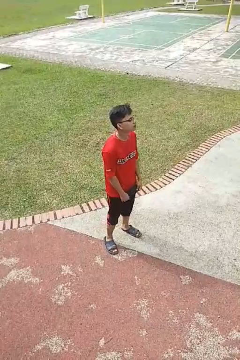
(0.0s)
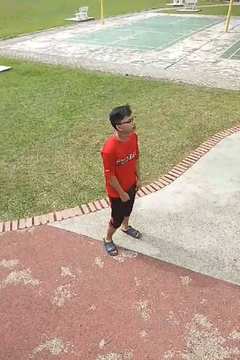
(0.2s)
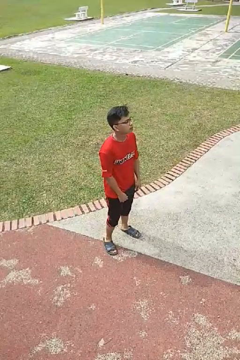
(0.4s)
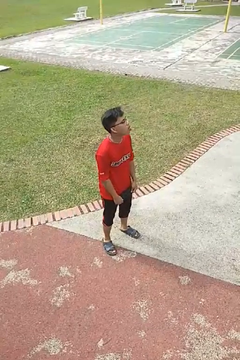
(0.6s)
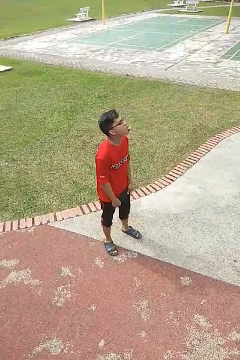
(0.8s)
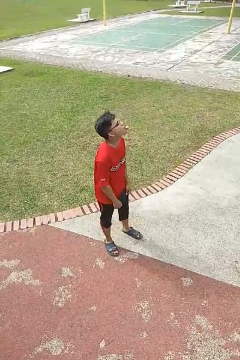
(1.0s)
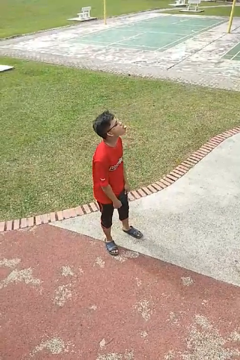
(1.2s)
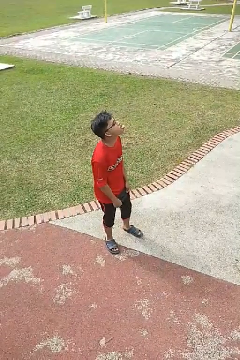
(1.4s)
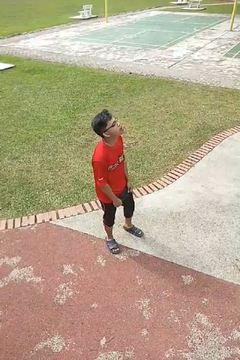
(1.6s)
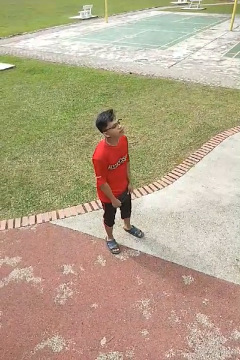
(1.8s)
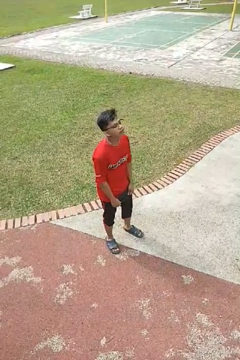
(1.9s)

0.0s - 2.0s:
person sticks out tongue

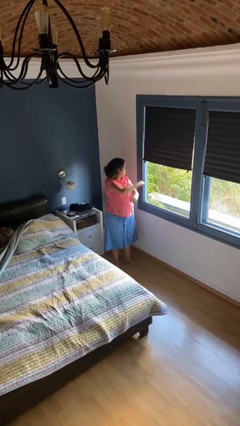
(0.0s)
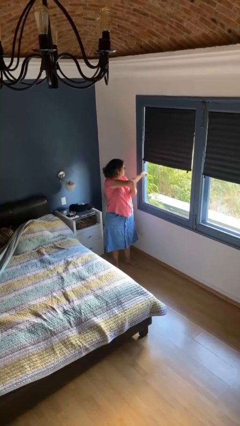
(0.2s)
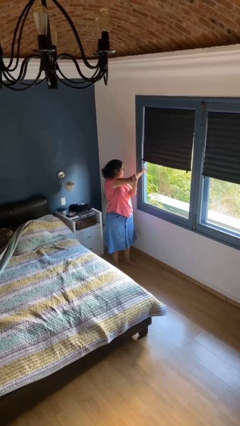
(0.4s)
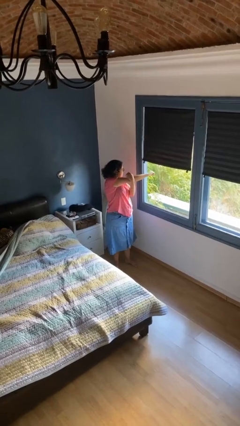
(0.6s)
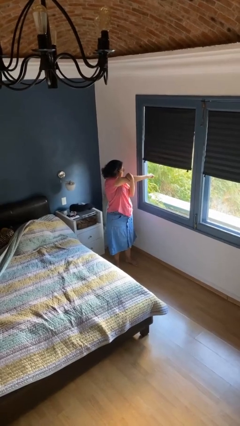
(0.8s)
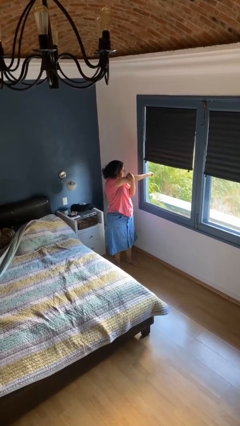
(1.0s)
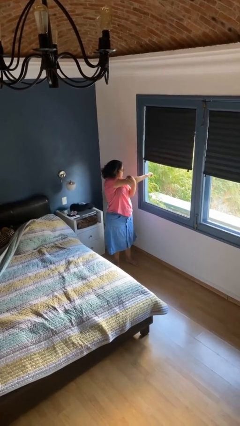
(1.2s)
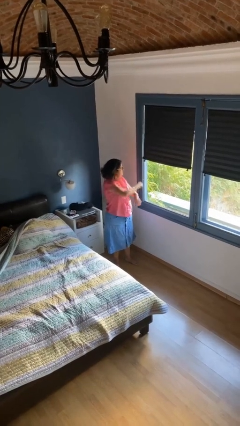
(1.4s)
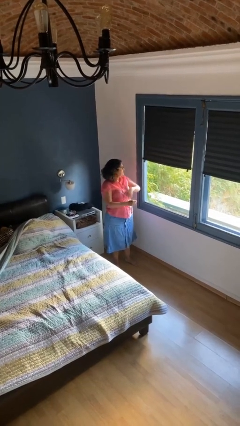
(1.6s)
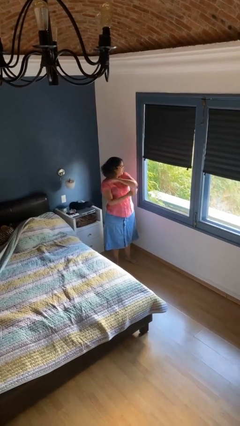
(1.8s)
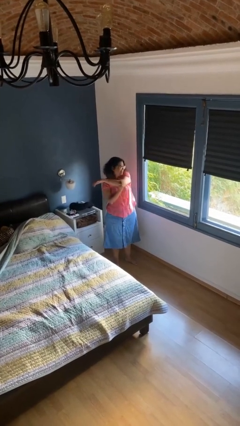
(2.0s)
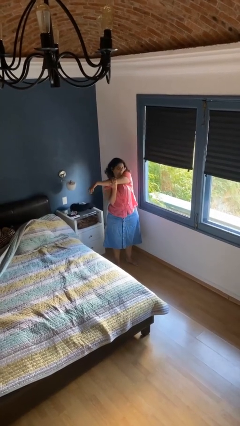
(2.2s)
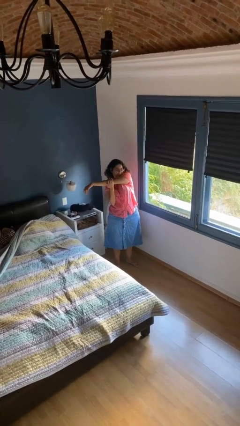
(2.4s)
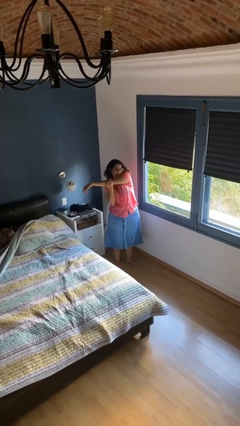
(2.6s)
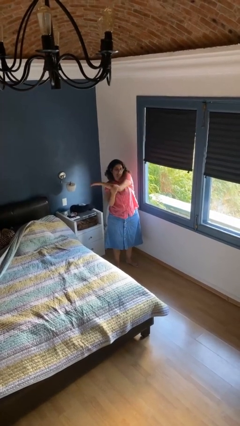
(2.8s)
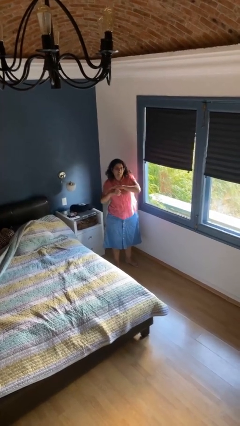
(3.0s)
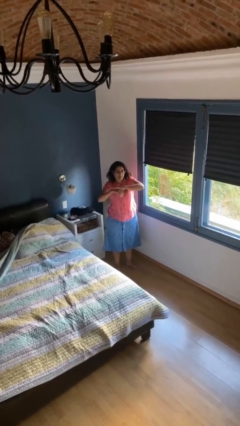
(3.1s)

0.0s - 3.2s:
person stretches arms to side

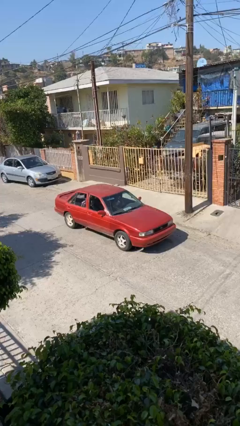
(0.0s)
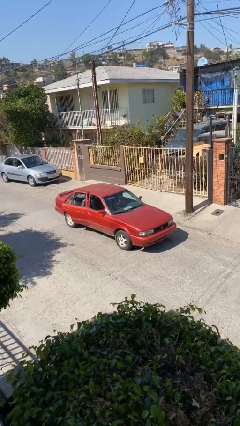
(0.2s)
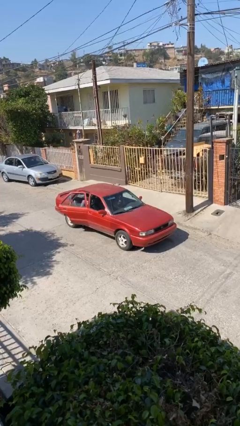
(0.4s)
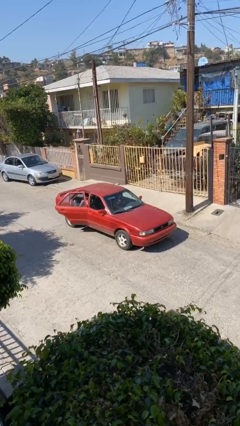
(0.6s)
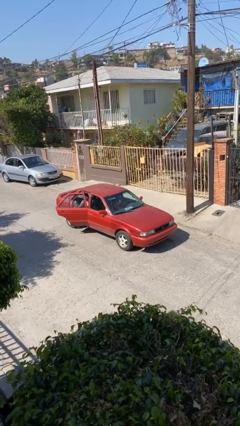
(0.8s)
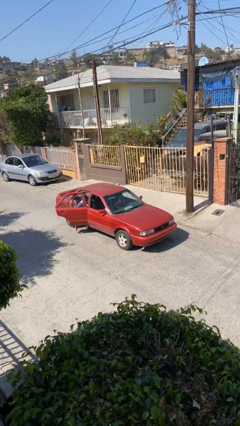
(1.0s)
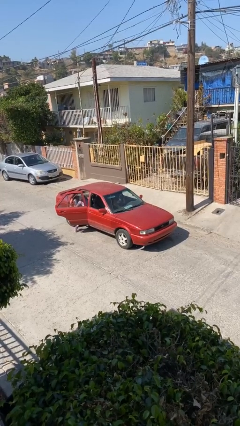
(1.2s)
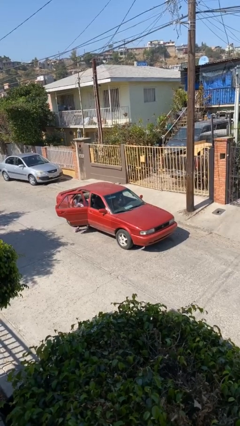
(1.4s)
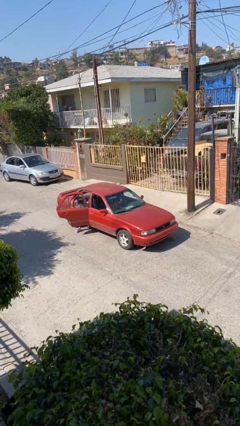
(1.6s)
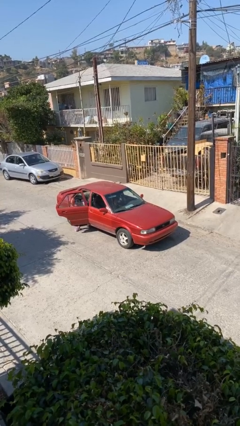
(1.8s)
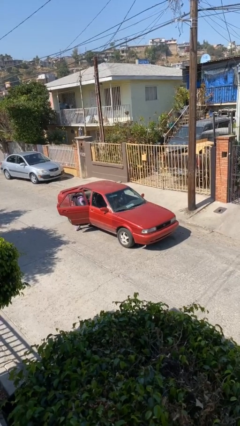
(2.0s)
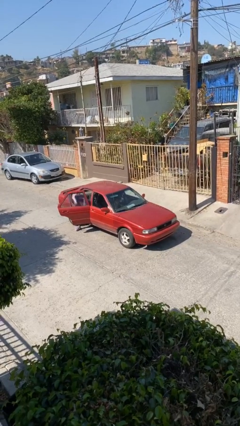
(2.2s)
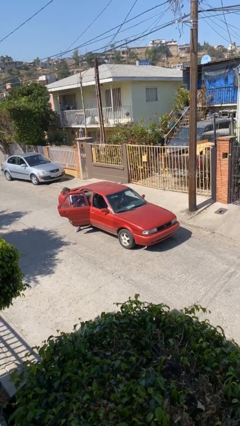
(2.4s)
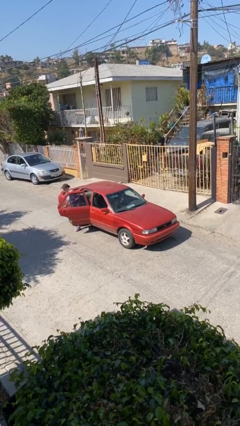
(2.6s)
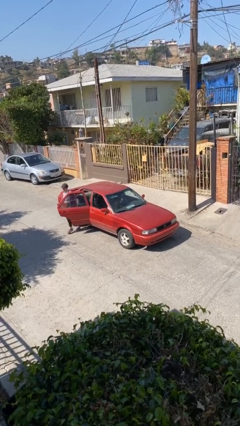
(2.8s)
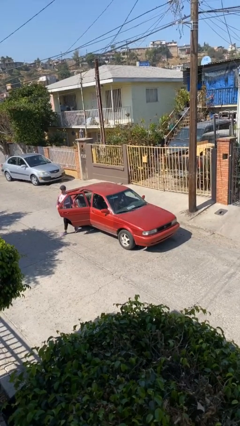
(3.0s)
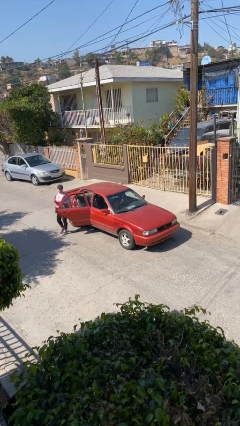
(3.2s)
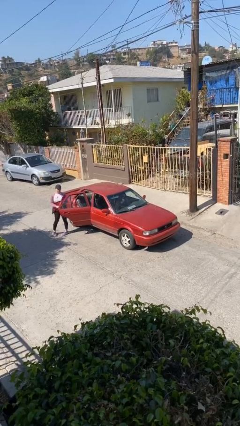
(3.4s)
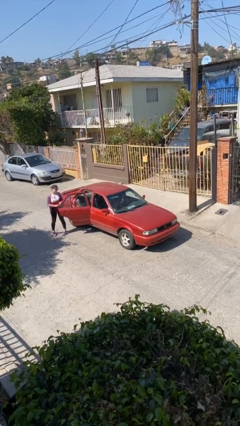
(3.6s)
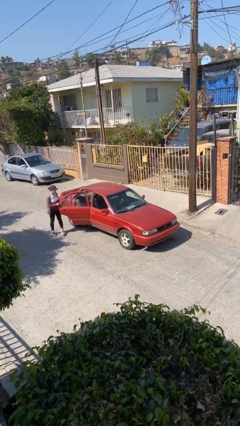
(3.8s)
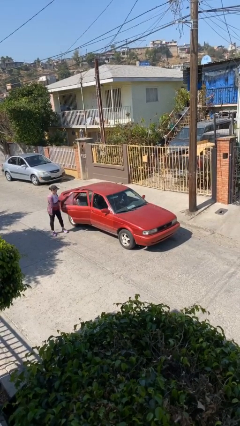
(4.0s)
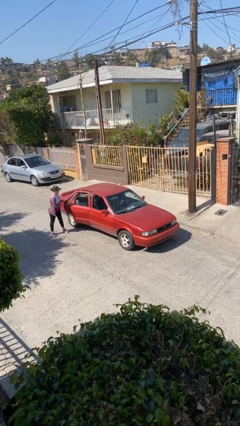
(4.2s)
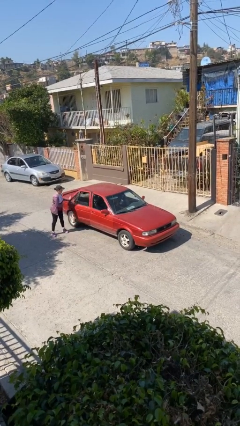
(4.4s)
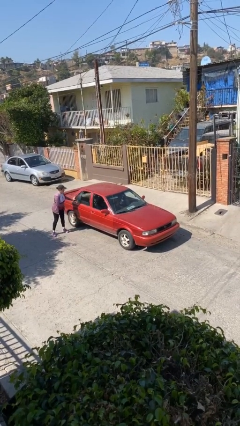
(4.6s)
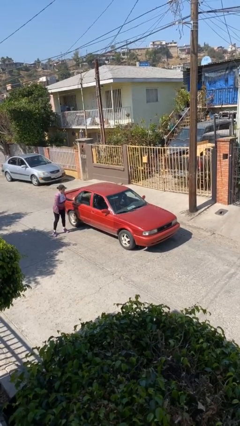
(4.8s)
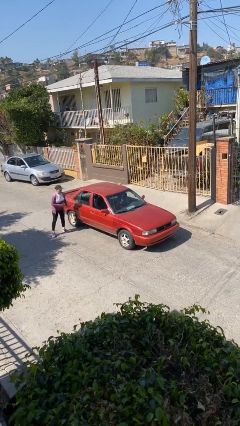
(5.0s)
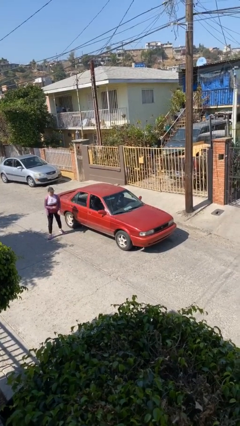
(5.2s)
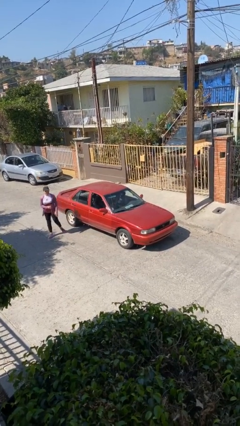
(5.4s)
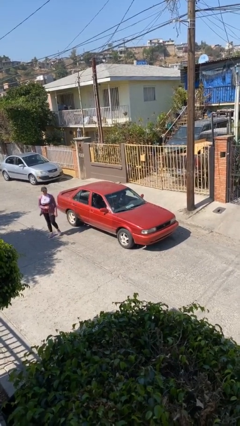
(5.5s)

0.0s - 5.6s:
car drops off person

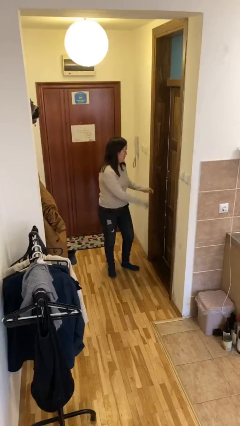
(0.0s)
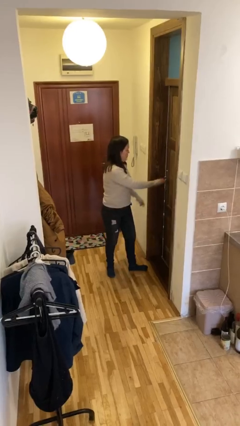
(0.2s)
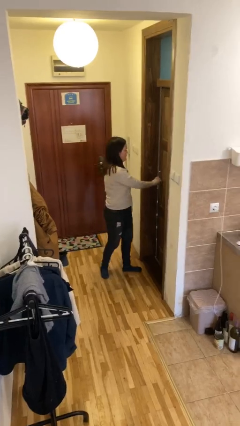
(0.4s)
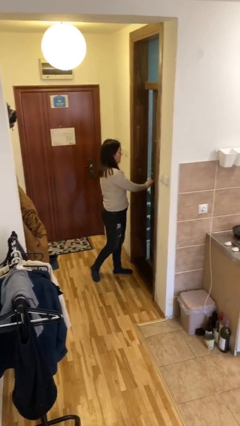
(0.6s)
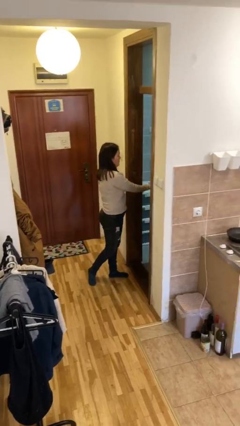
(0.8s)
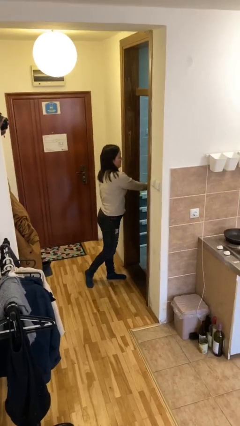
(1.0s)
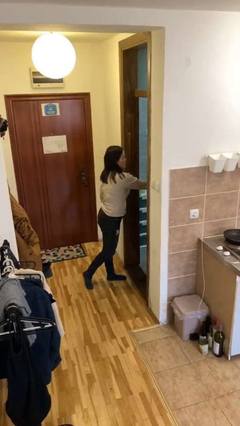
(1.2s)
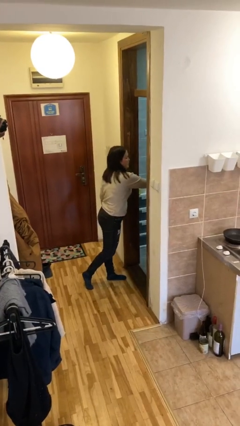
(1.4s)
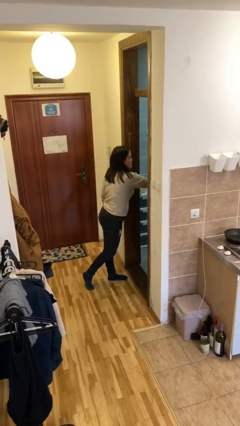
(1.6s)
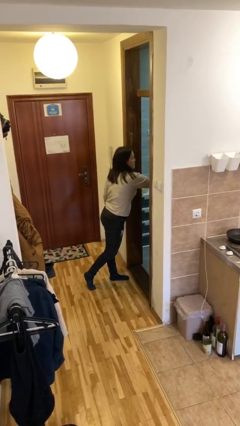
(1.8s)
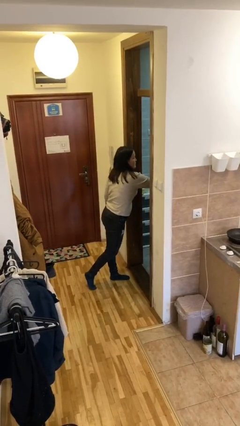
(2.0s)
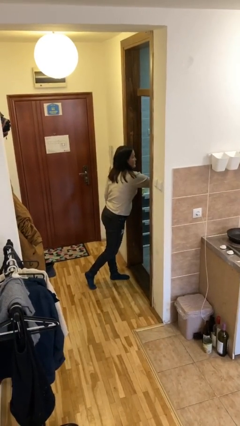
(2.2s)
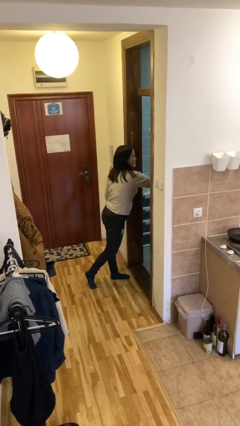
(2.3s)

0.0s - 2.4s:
person opens facility door

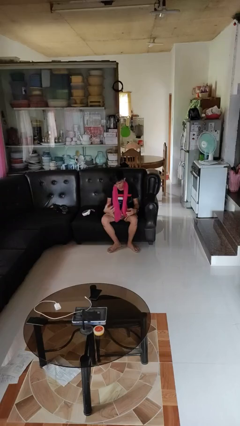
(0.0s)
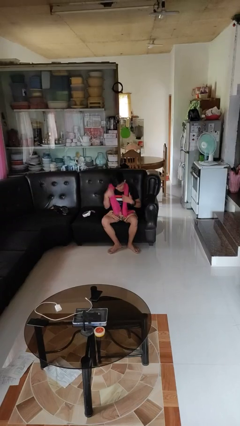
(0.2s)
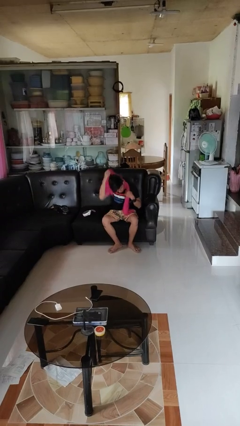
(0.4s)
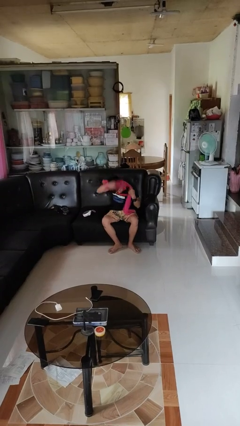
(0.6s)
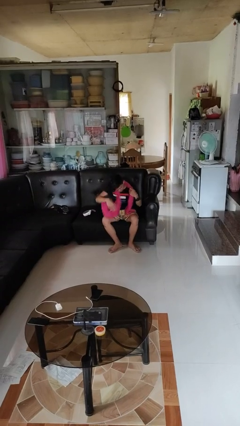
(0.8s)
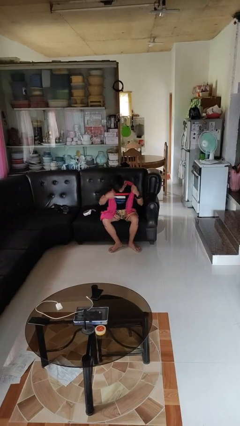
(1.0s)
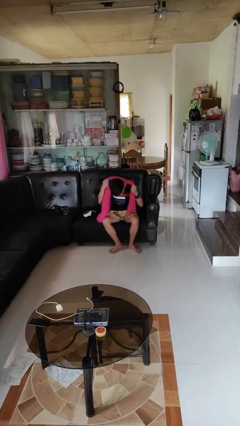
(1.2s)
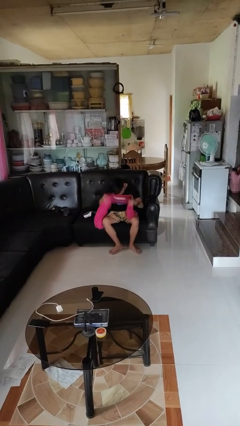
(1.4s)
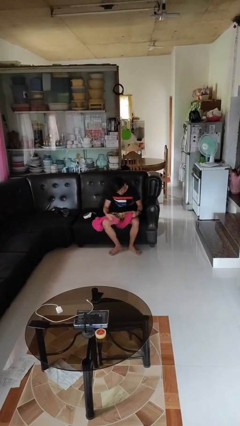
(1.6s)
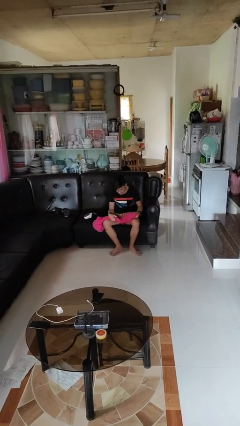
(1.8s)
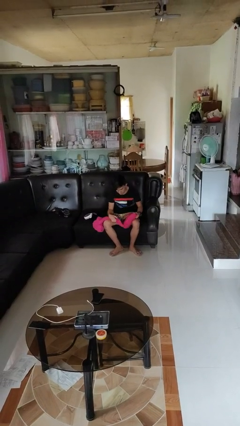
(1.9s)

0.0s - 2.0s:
person takes off scarf

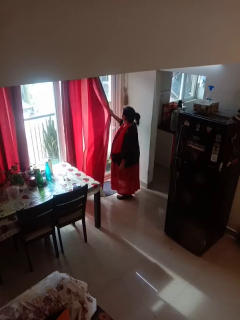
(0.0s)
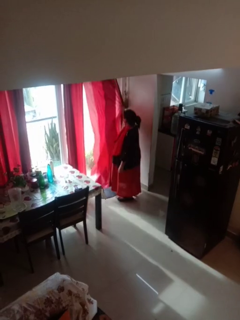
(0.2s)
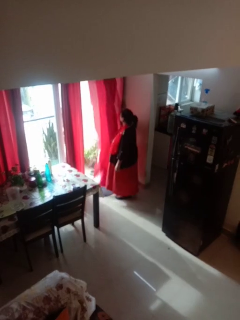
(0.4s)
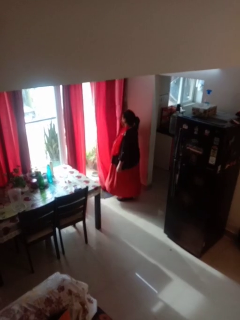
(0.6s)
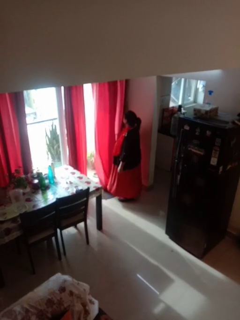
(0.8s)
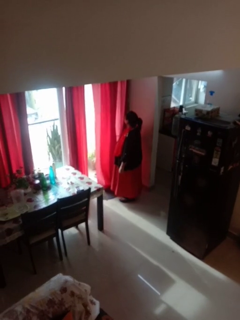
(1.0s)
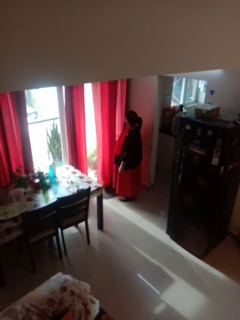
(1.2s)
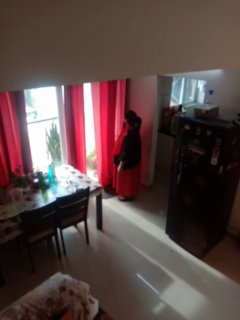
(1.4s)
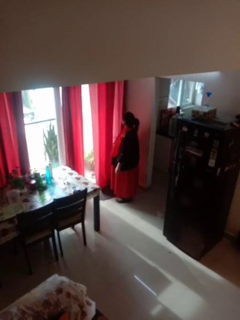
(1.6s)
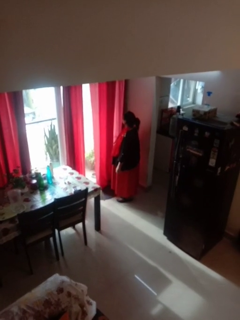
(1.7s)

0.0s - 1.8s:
person closes curtains

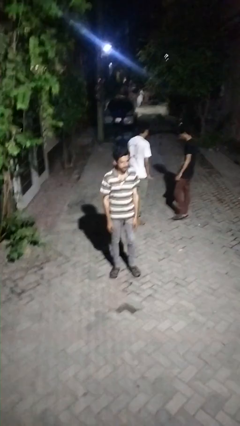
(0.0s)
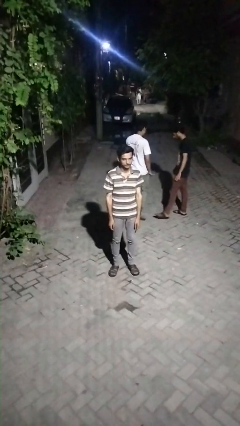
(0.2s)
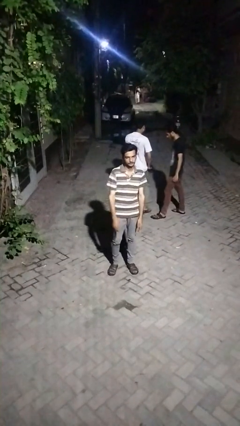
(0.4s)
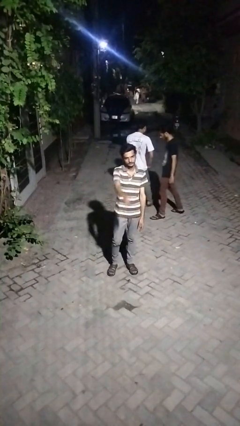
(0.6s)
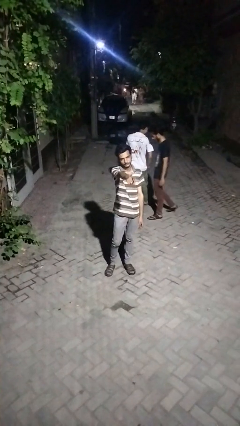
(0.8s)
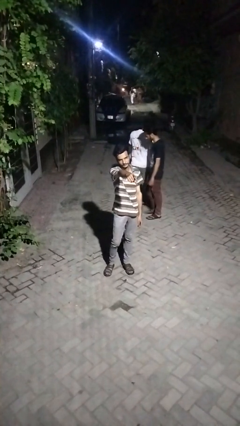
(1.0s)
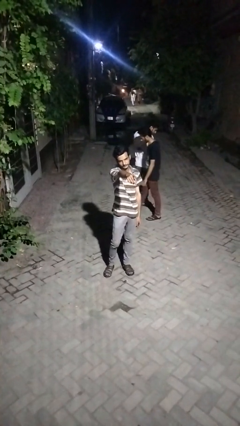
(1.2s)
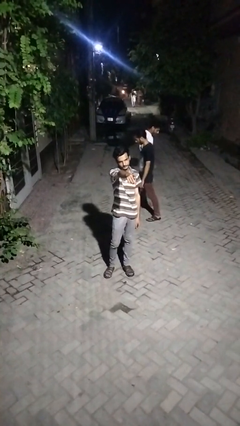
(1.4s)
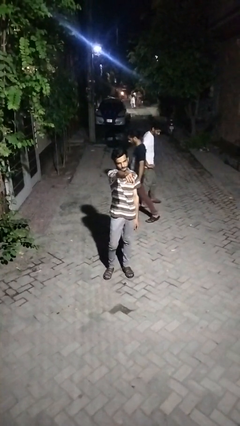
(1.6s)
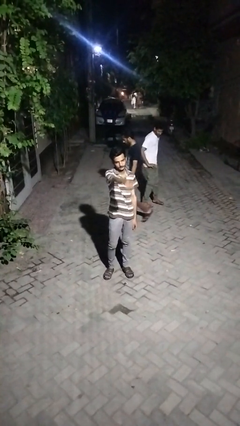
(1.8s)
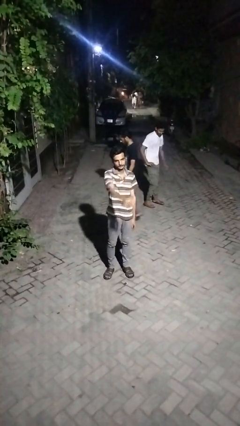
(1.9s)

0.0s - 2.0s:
person points at person
